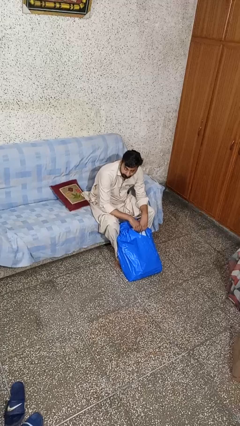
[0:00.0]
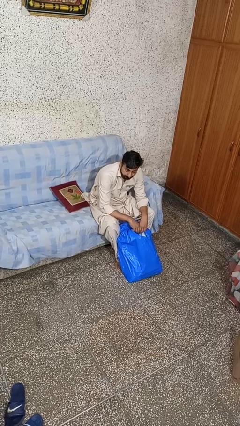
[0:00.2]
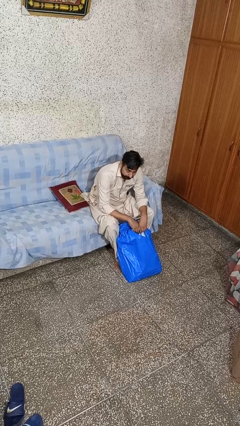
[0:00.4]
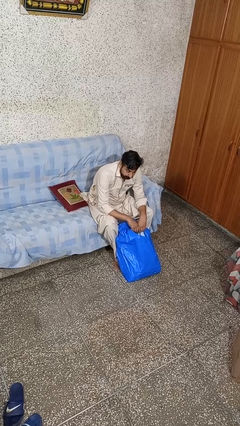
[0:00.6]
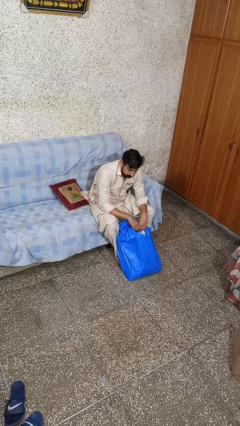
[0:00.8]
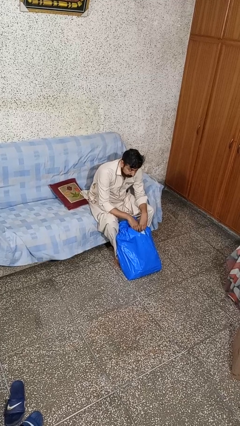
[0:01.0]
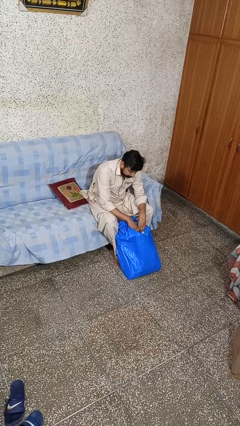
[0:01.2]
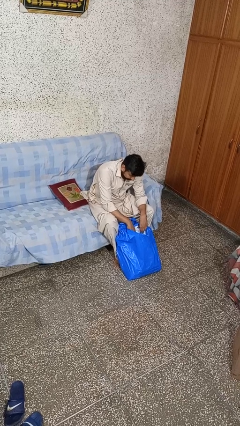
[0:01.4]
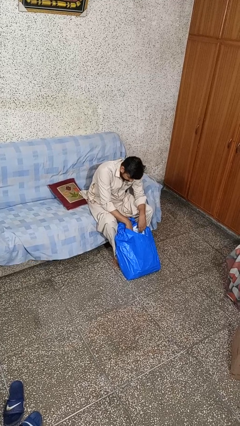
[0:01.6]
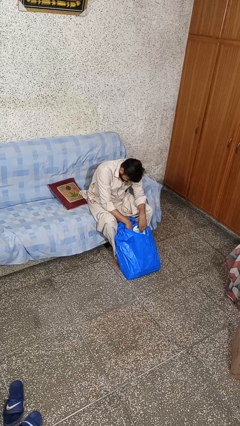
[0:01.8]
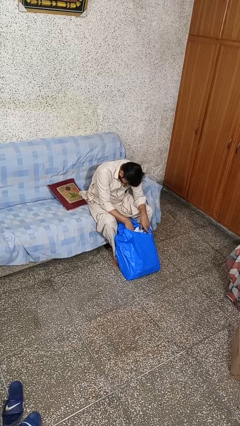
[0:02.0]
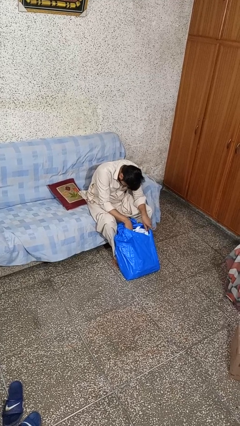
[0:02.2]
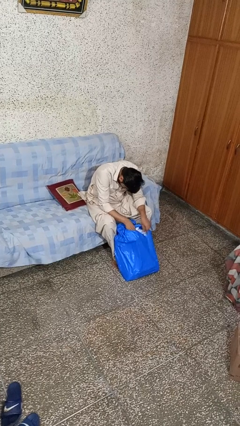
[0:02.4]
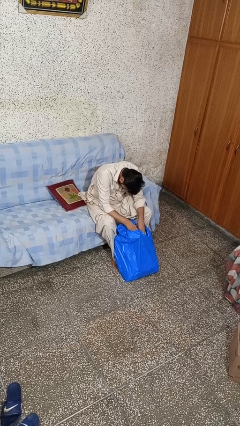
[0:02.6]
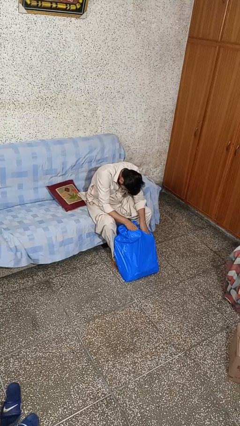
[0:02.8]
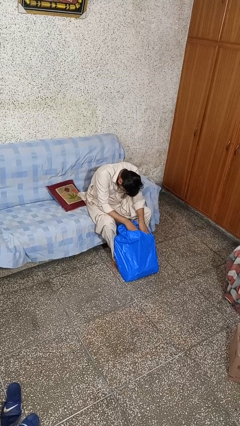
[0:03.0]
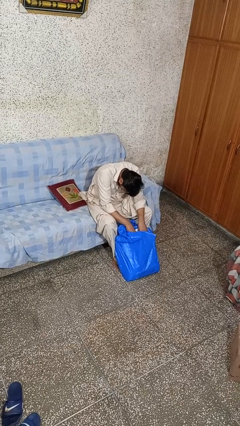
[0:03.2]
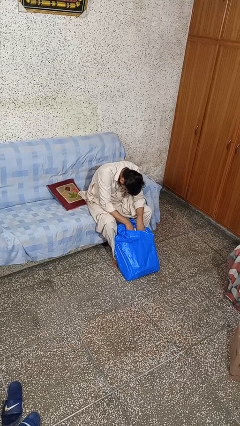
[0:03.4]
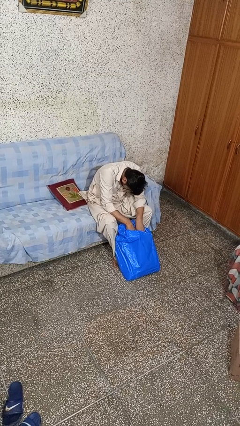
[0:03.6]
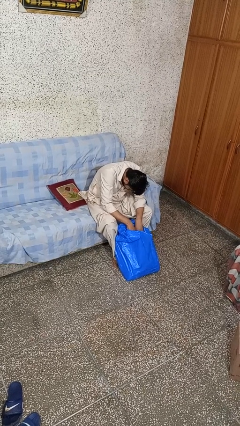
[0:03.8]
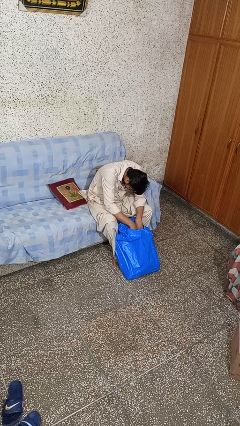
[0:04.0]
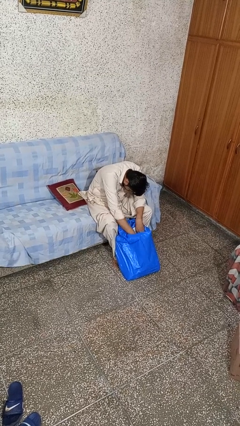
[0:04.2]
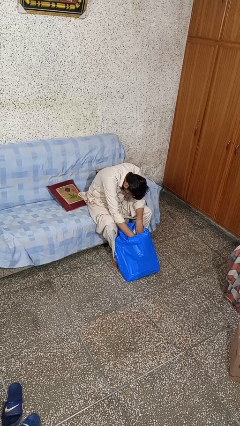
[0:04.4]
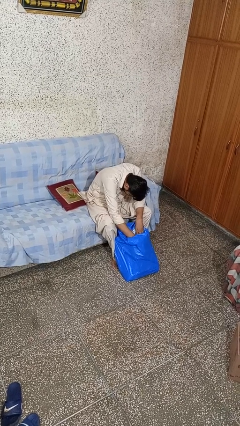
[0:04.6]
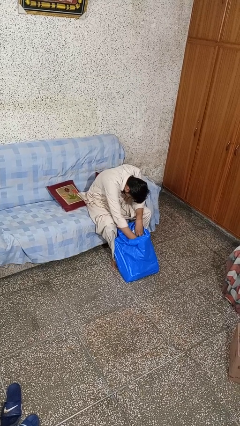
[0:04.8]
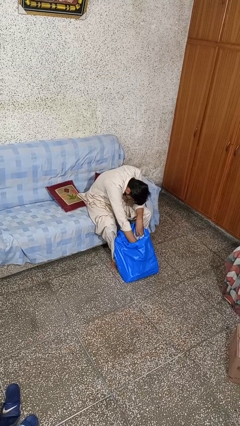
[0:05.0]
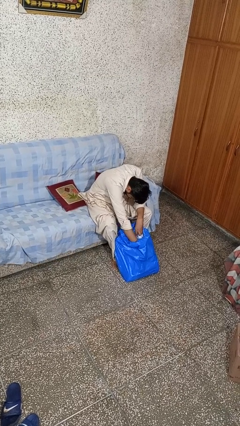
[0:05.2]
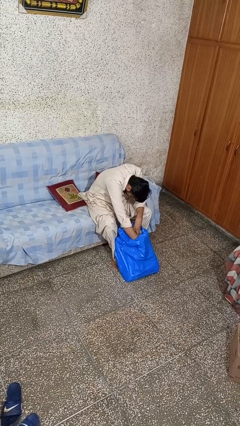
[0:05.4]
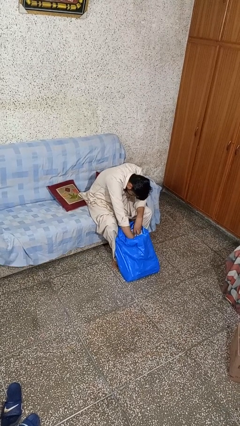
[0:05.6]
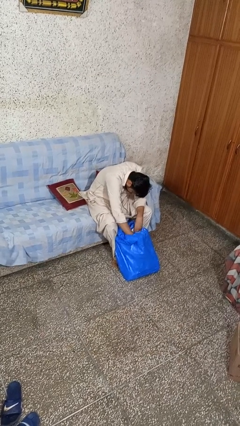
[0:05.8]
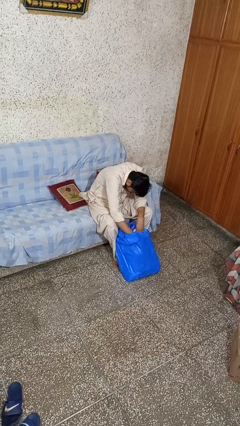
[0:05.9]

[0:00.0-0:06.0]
person searches in bag

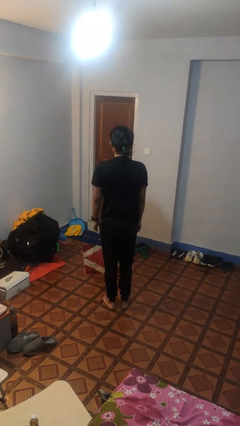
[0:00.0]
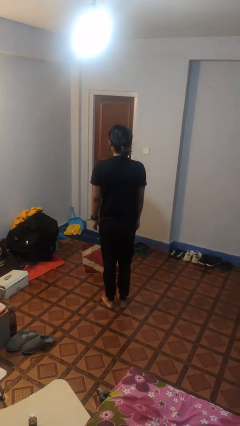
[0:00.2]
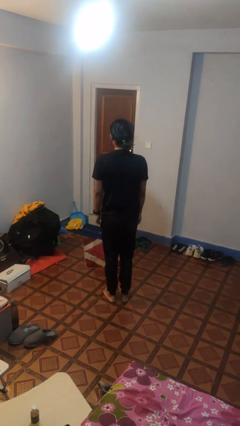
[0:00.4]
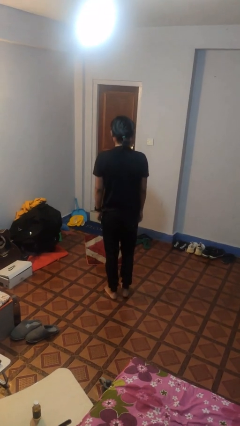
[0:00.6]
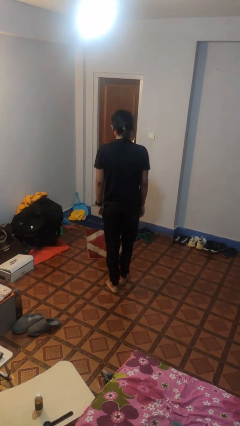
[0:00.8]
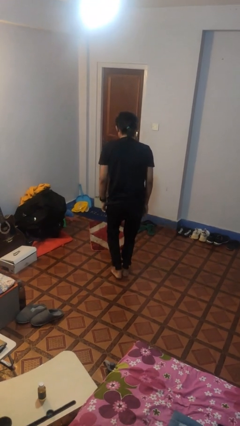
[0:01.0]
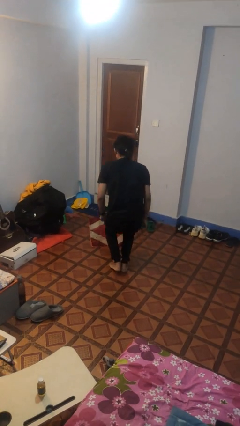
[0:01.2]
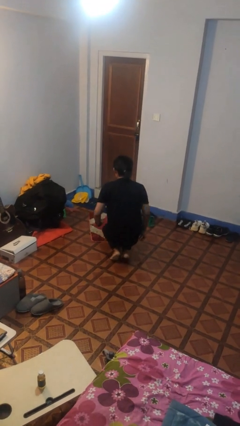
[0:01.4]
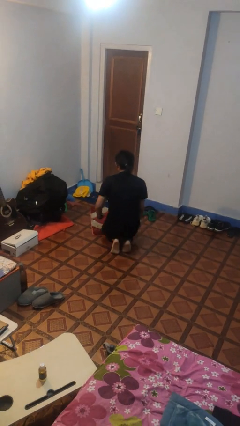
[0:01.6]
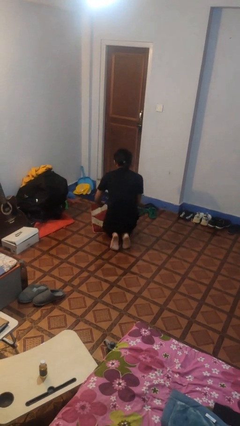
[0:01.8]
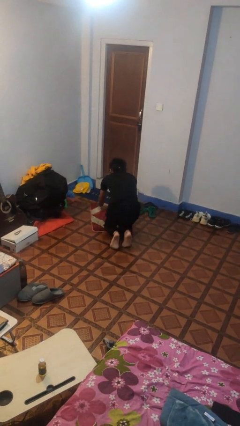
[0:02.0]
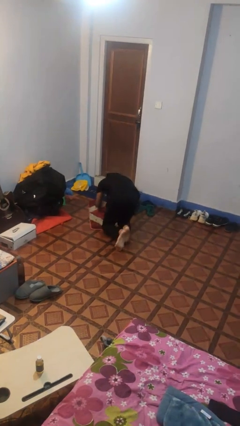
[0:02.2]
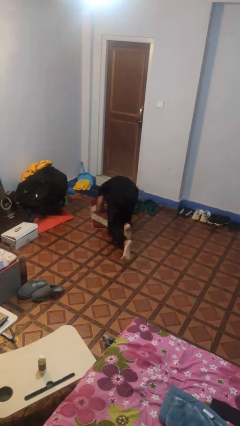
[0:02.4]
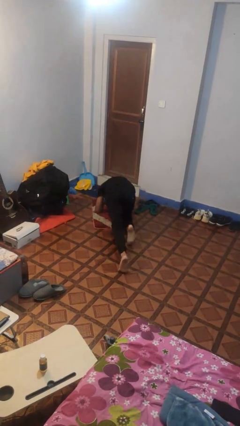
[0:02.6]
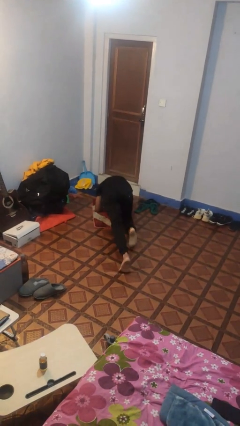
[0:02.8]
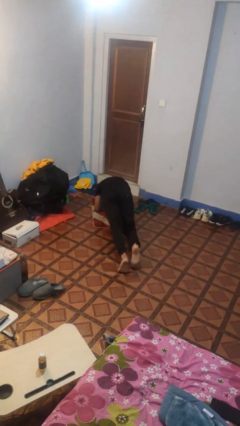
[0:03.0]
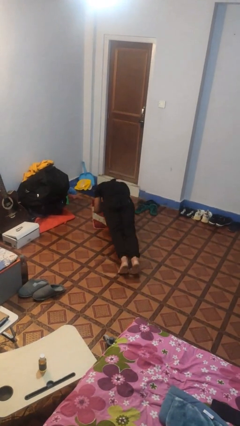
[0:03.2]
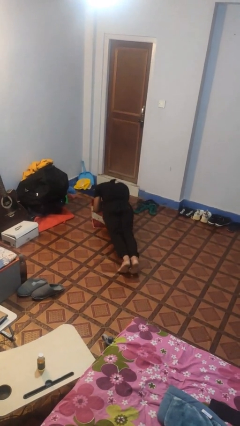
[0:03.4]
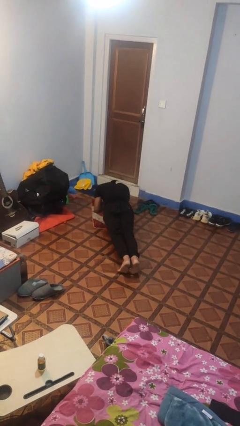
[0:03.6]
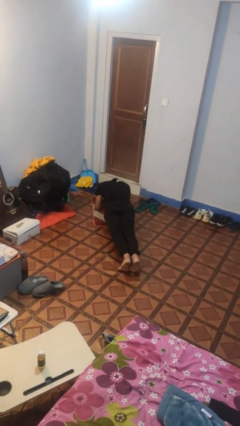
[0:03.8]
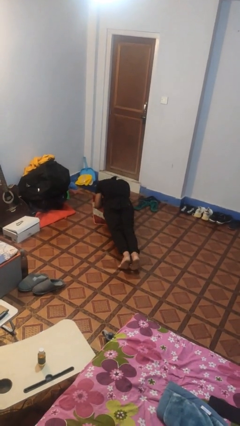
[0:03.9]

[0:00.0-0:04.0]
person exercises with plank

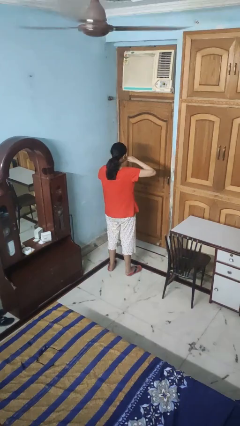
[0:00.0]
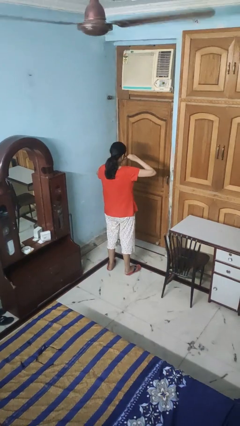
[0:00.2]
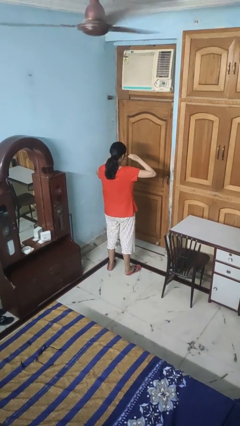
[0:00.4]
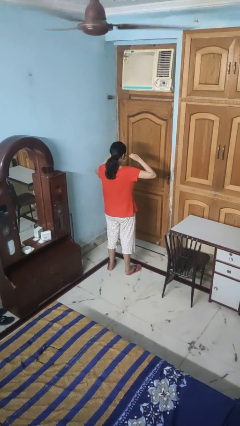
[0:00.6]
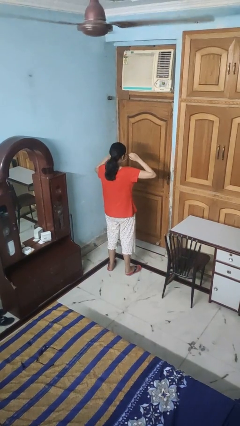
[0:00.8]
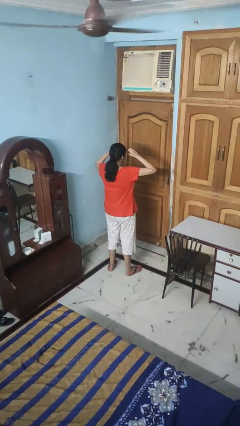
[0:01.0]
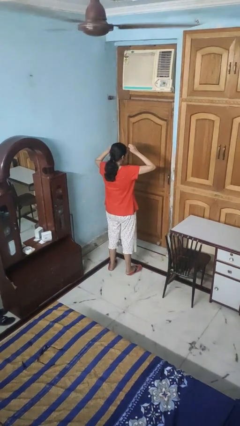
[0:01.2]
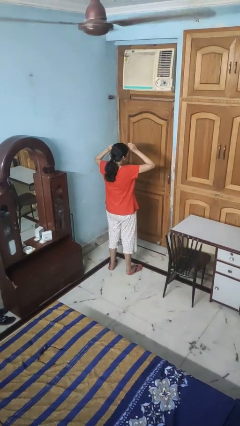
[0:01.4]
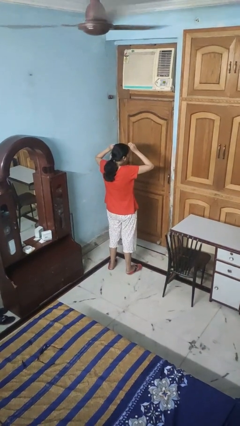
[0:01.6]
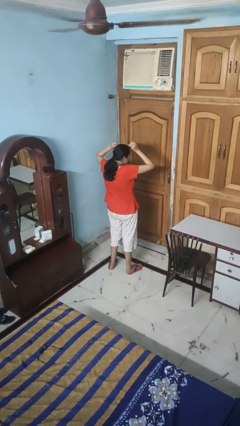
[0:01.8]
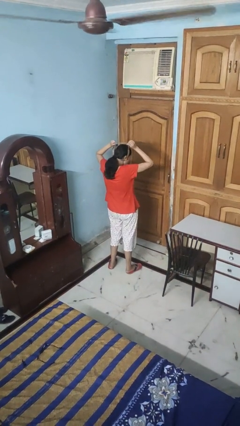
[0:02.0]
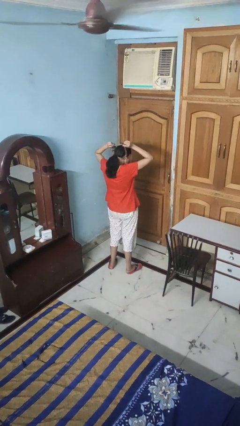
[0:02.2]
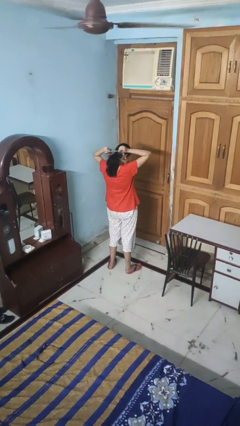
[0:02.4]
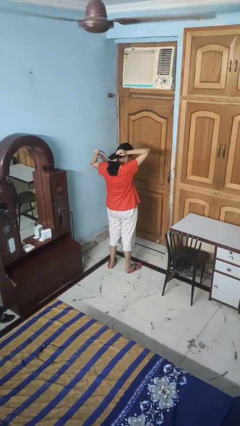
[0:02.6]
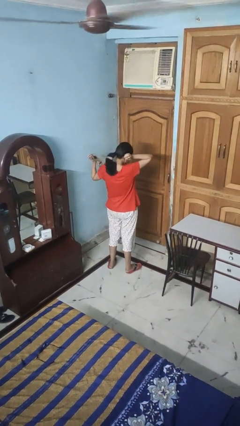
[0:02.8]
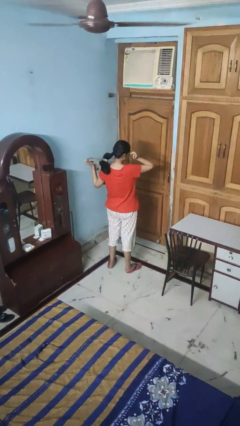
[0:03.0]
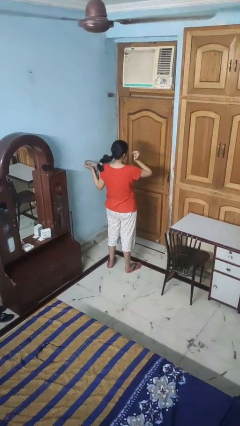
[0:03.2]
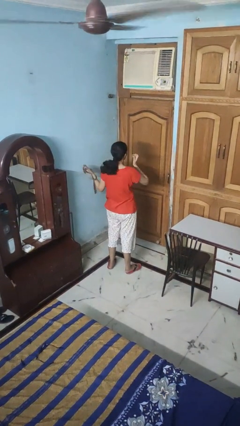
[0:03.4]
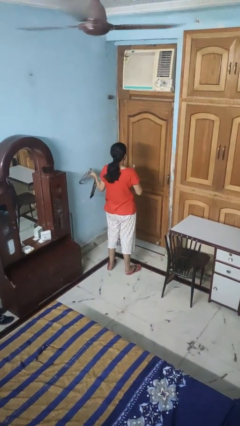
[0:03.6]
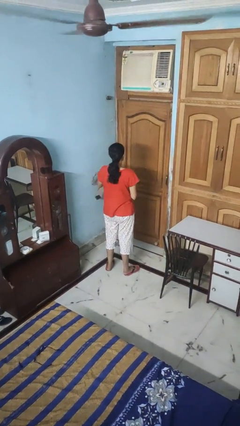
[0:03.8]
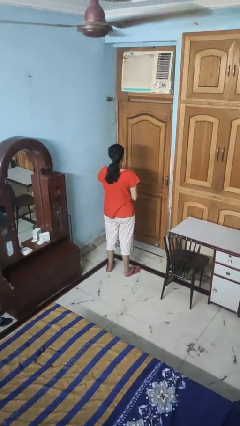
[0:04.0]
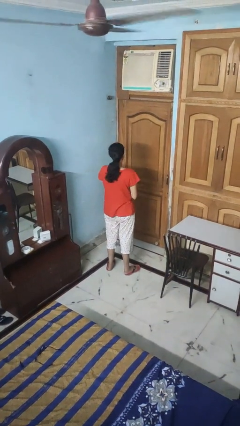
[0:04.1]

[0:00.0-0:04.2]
person takes off necktie

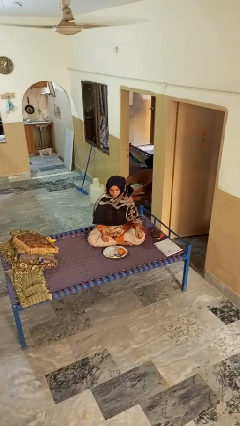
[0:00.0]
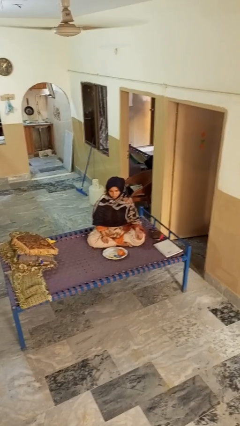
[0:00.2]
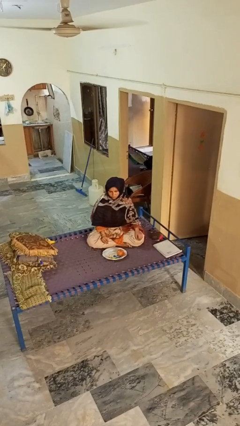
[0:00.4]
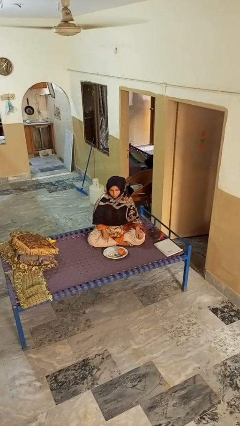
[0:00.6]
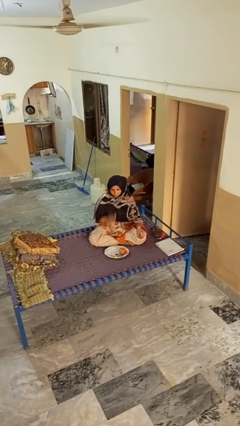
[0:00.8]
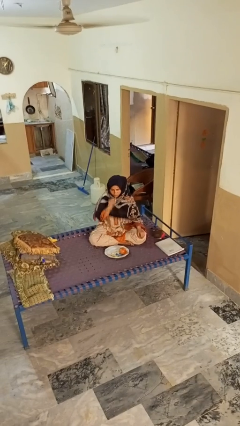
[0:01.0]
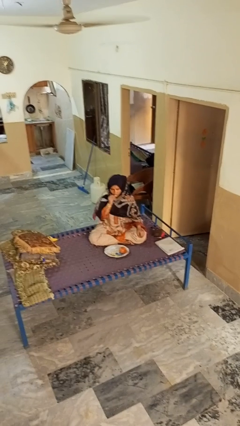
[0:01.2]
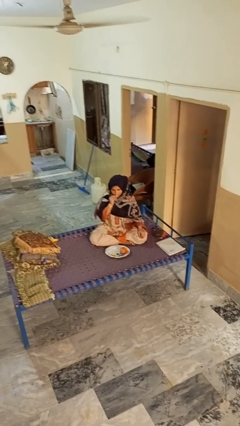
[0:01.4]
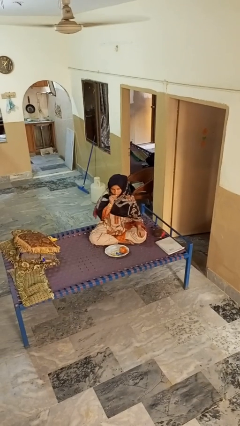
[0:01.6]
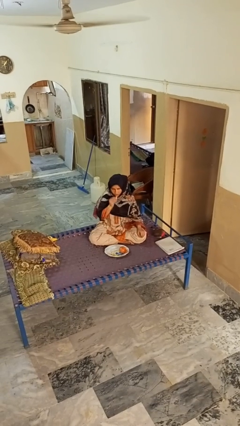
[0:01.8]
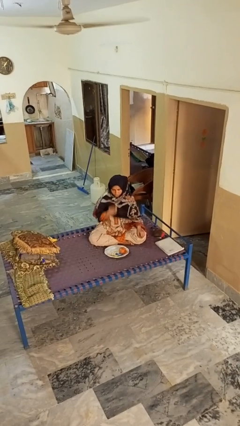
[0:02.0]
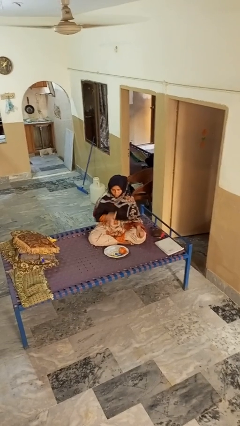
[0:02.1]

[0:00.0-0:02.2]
person eats apple

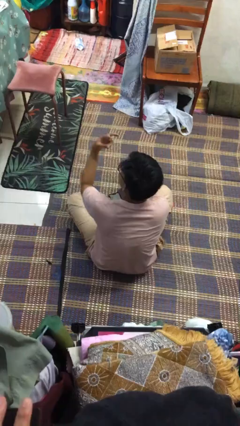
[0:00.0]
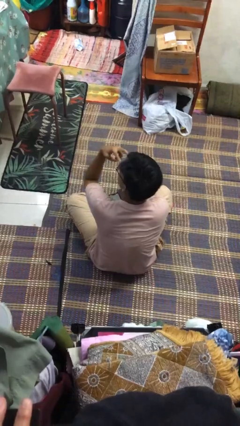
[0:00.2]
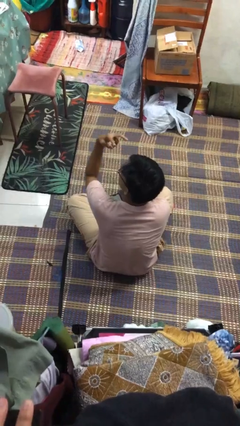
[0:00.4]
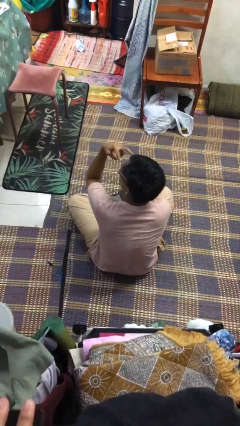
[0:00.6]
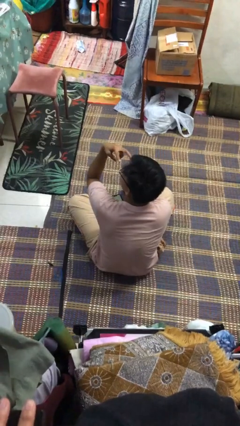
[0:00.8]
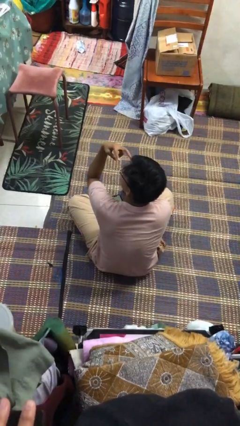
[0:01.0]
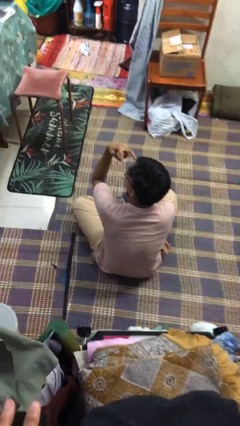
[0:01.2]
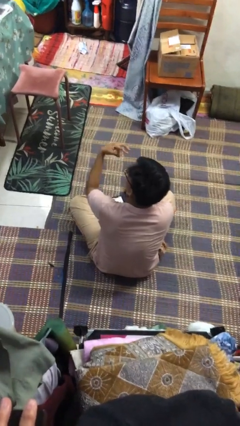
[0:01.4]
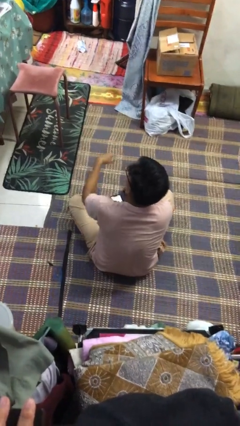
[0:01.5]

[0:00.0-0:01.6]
person gestures watch closely
